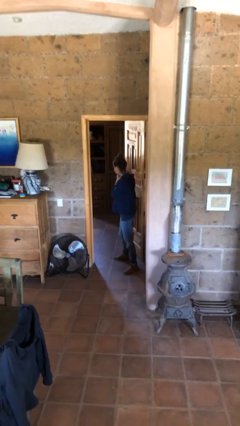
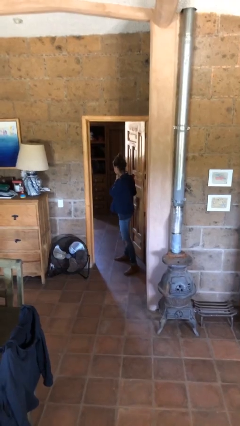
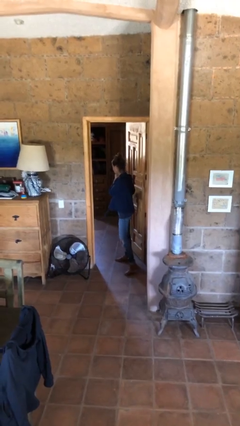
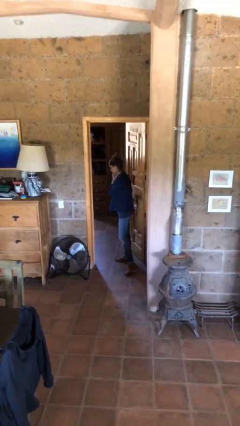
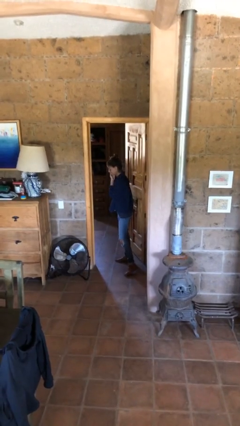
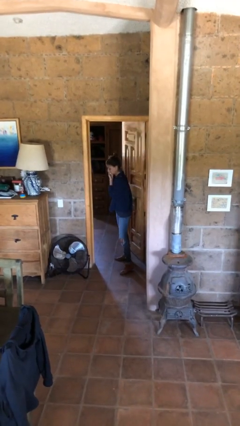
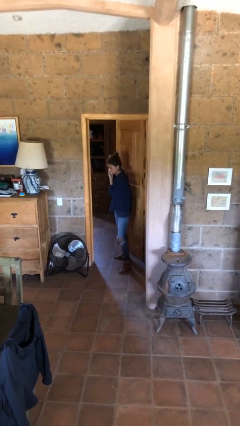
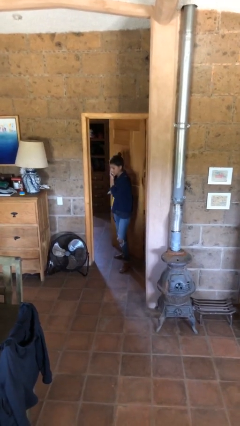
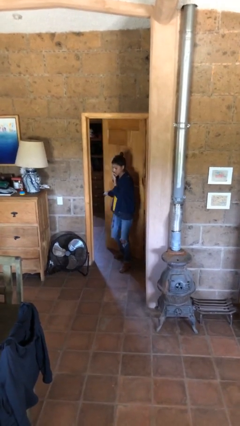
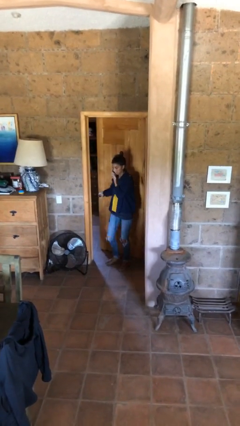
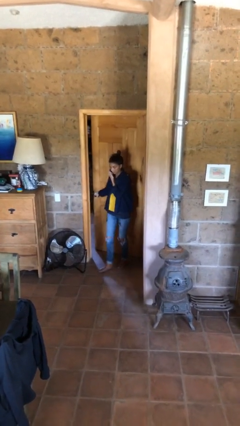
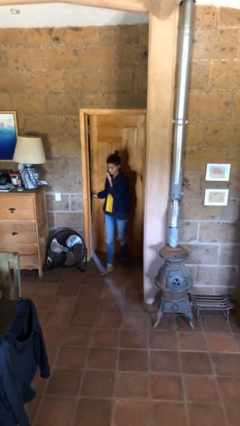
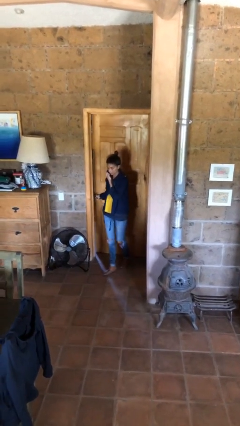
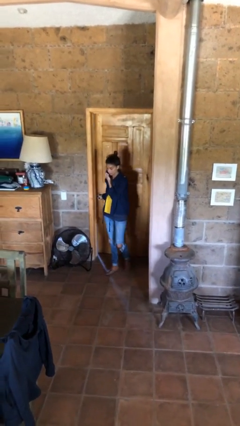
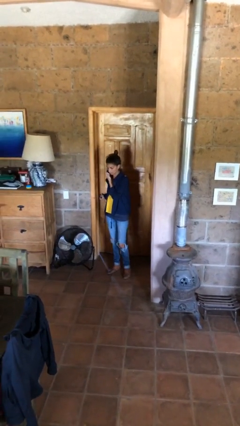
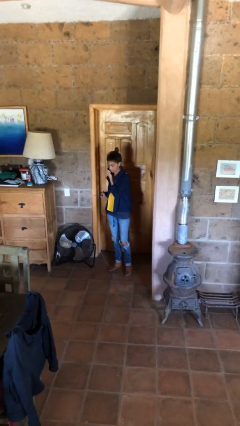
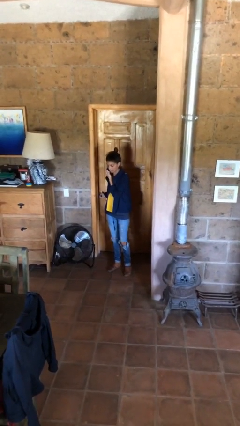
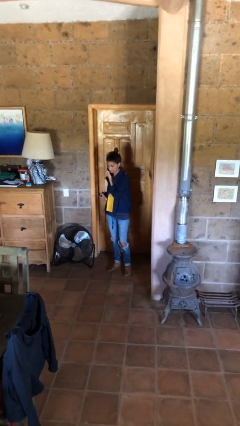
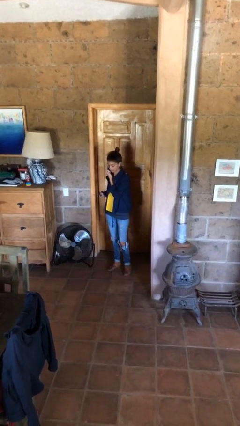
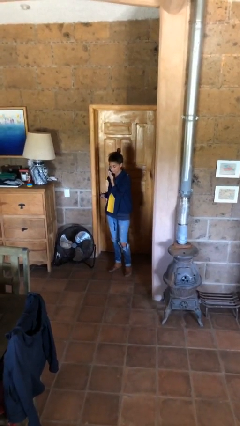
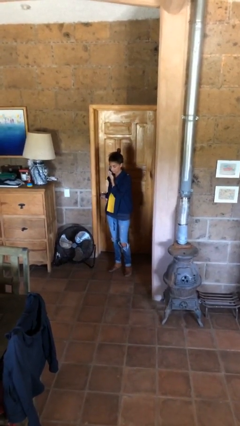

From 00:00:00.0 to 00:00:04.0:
person closes facility door

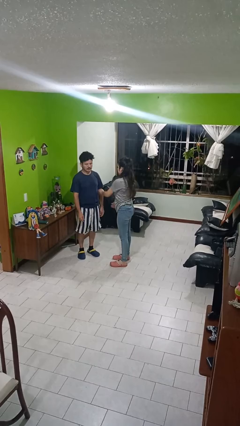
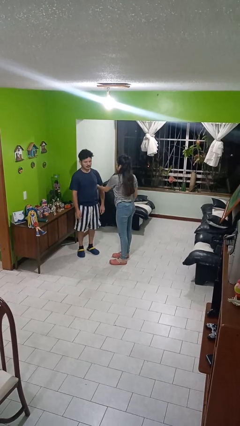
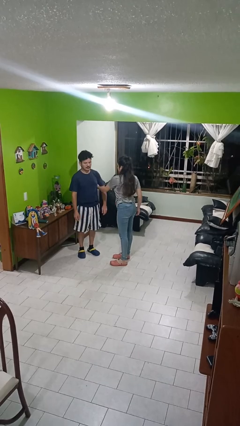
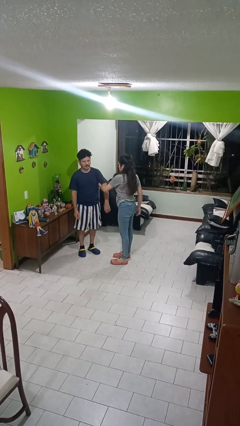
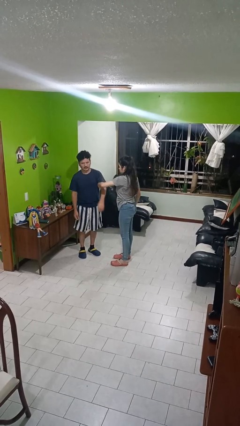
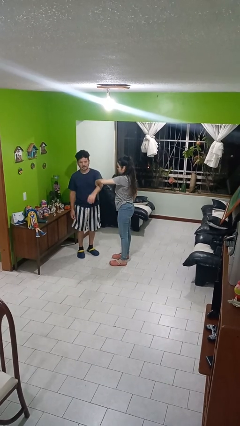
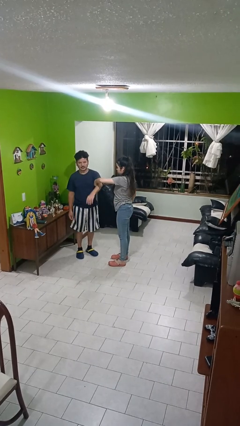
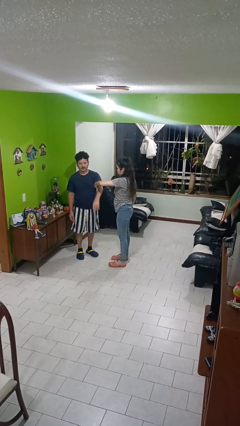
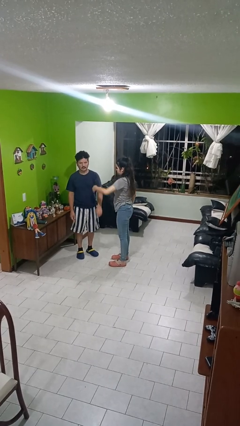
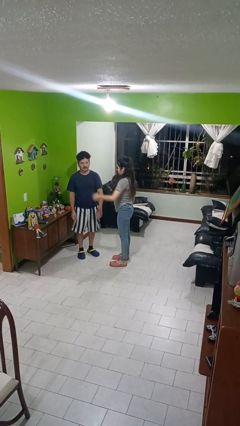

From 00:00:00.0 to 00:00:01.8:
person grabs person by bicep

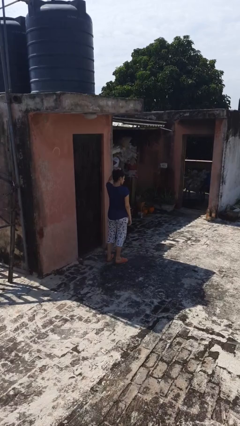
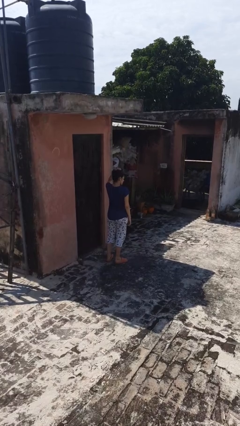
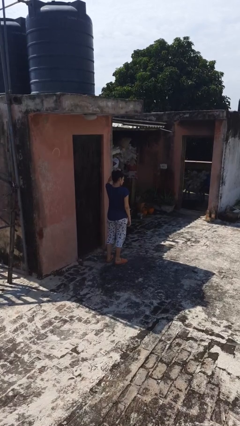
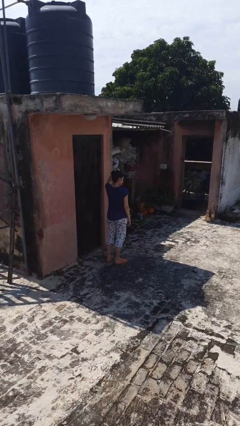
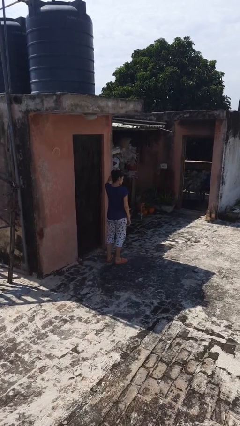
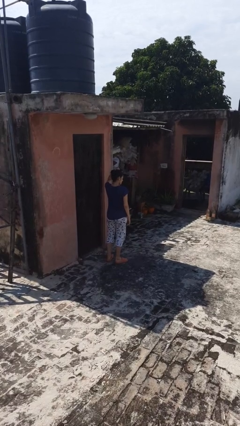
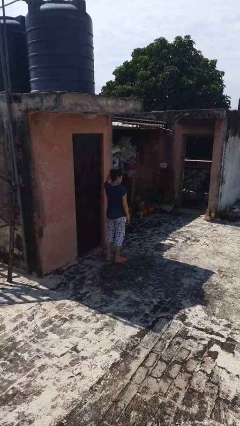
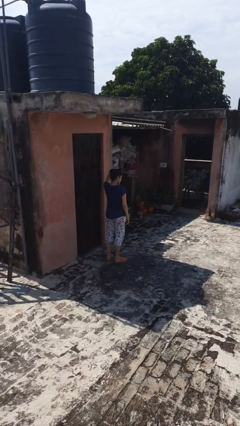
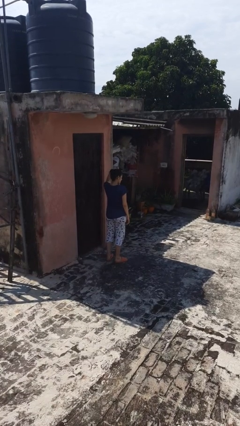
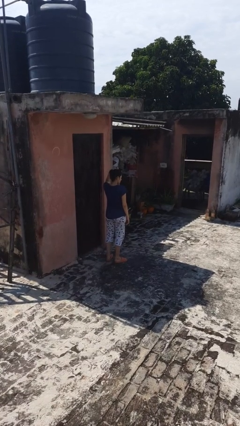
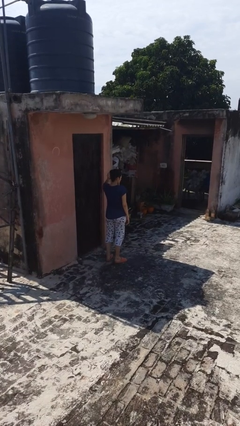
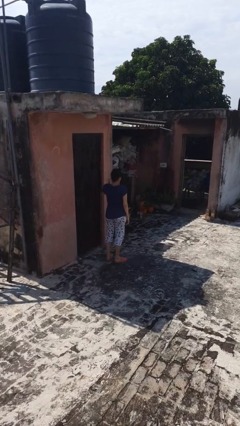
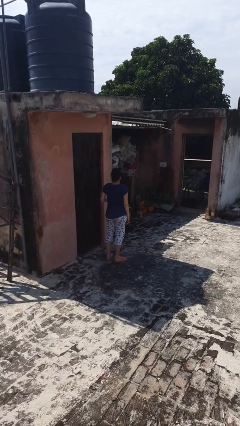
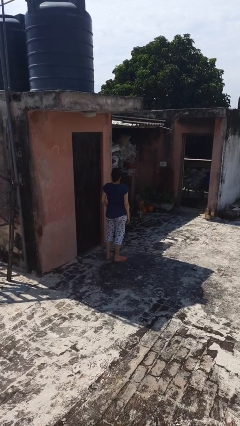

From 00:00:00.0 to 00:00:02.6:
person scratches face

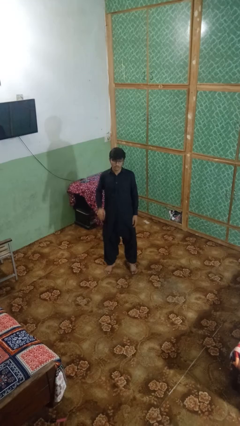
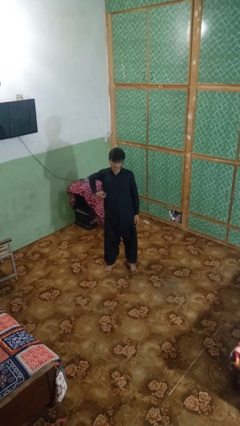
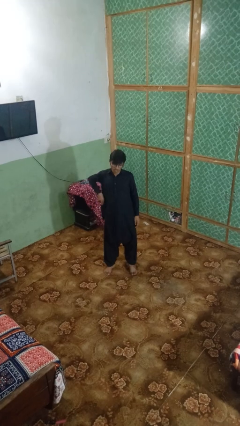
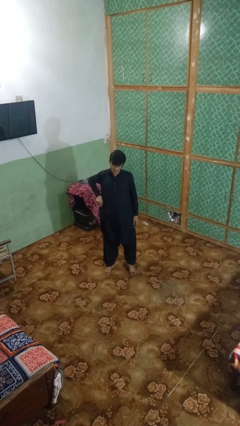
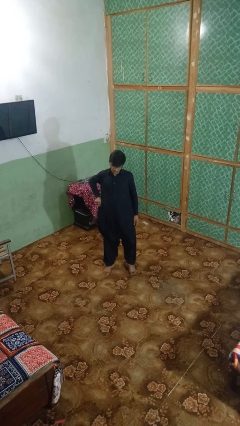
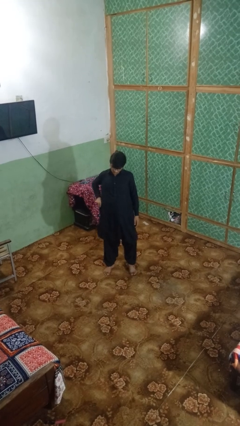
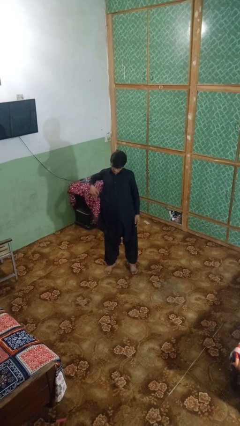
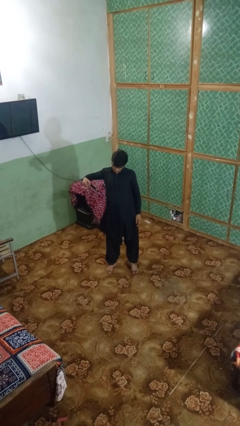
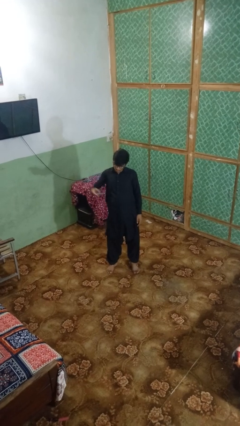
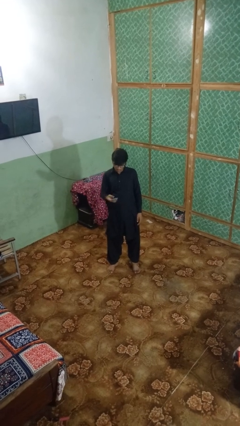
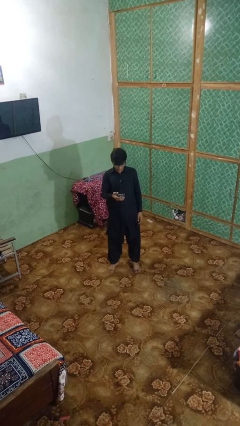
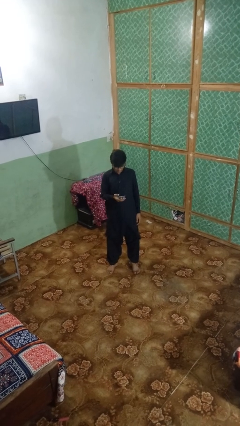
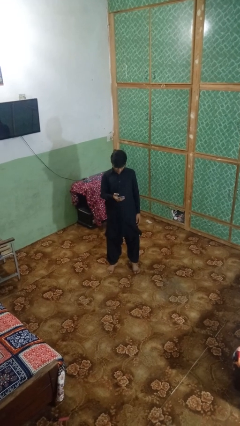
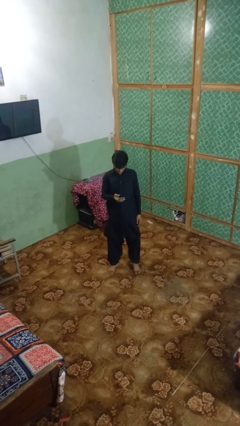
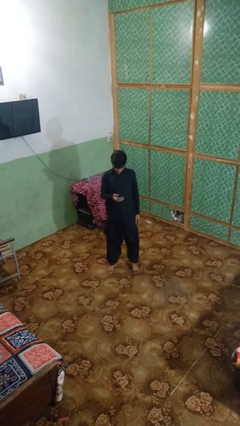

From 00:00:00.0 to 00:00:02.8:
person takes phone from pocket

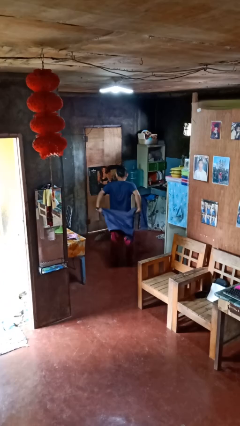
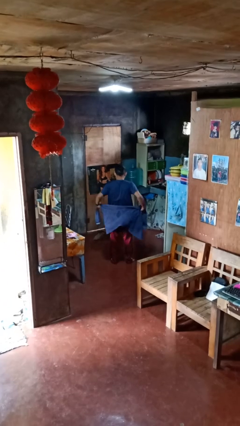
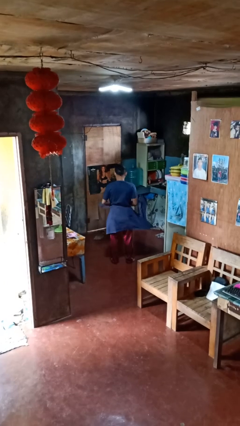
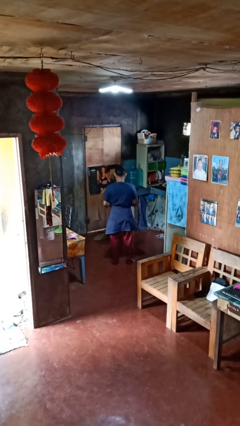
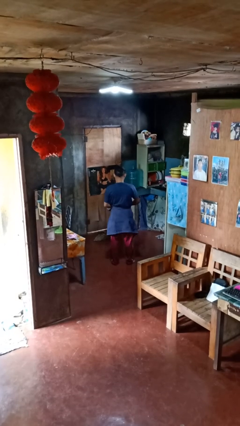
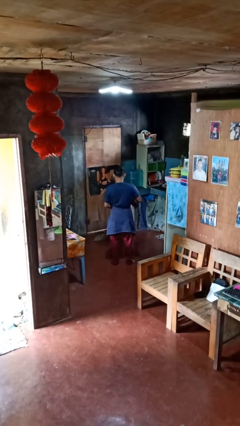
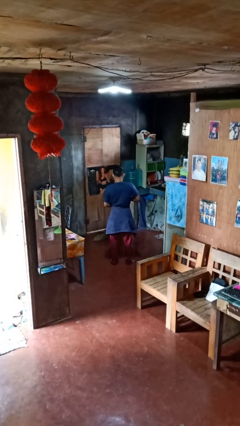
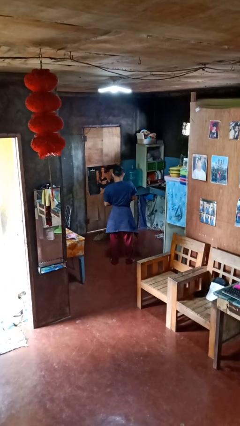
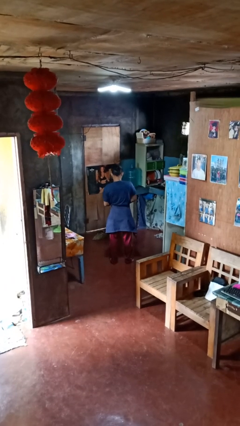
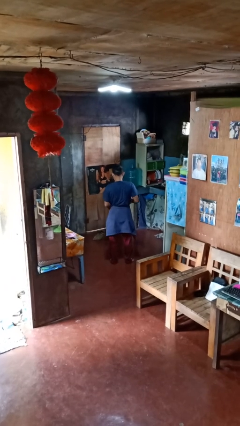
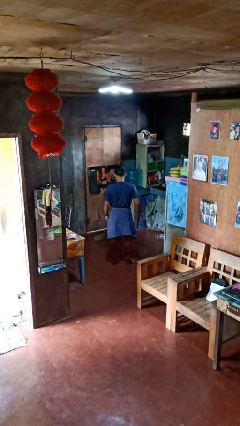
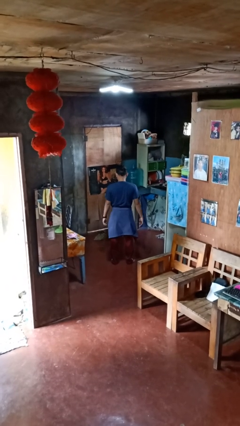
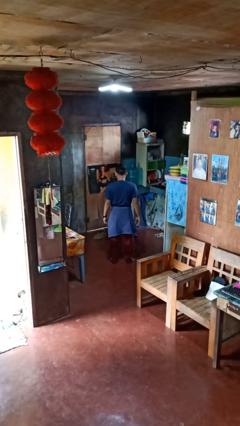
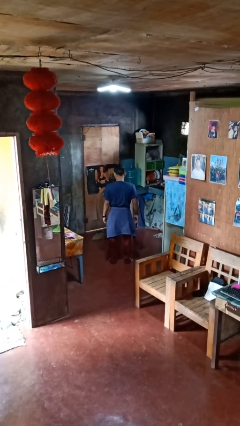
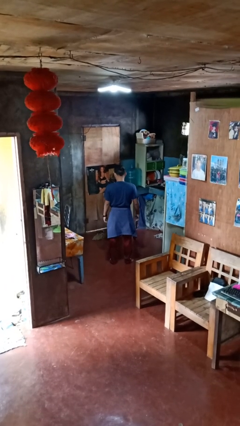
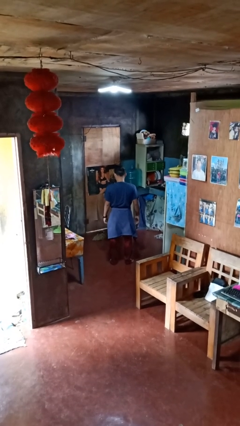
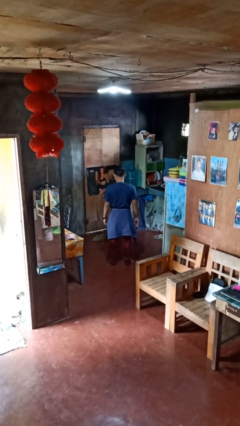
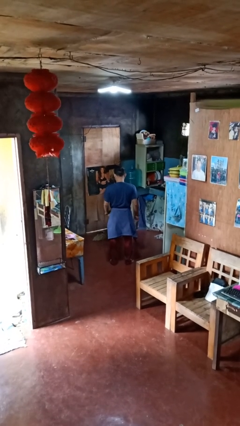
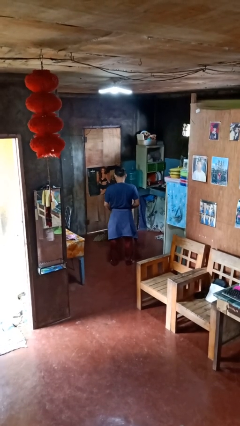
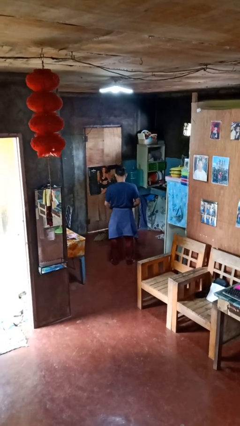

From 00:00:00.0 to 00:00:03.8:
person ties jacket around waist

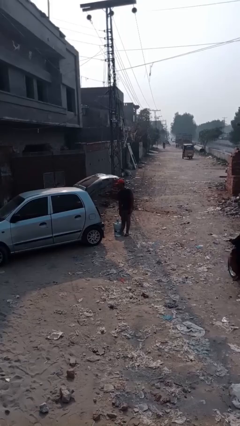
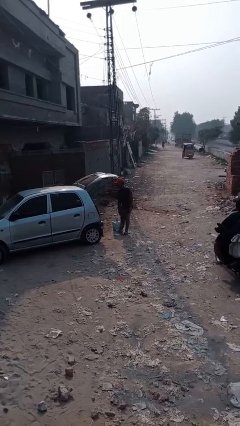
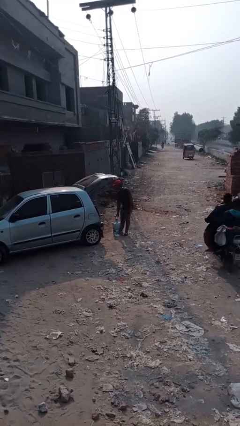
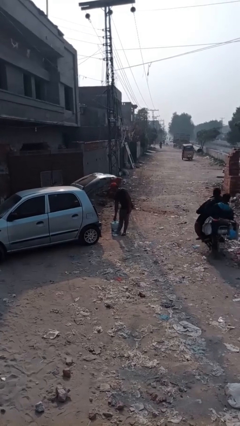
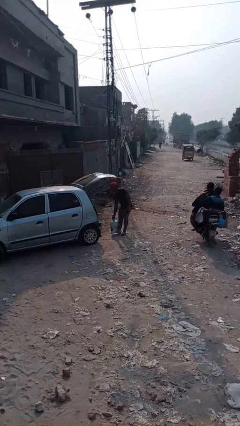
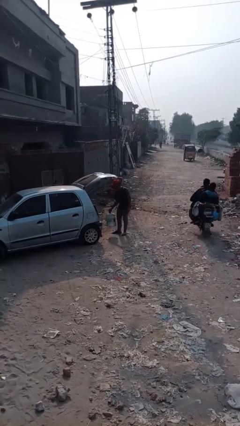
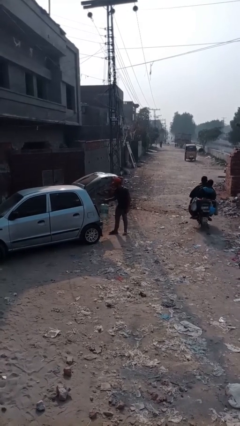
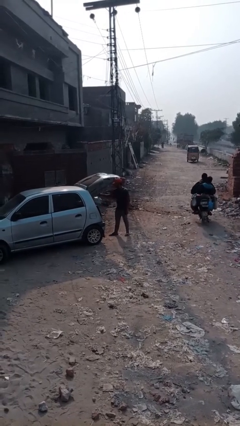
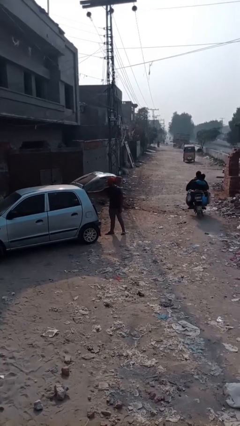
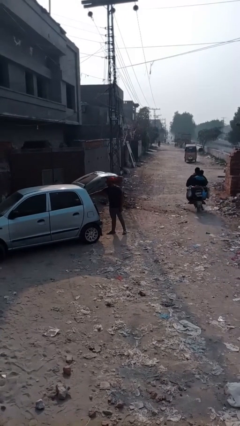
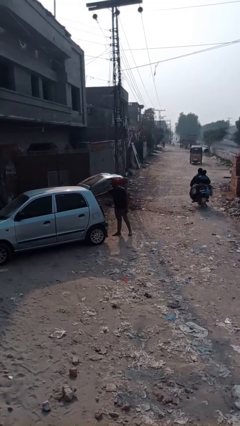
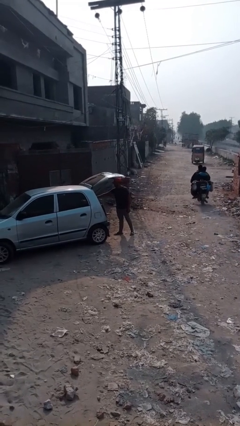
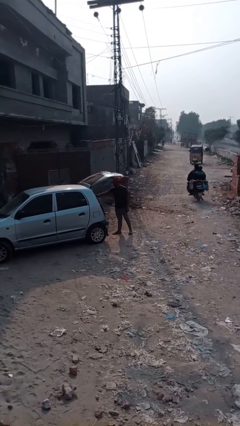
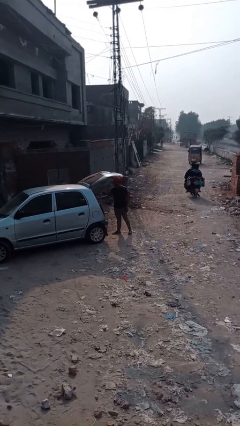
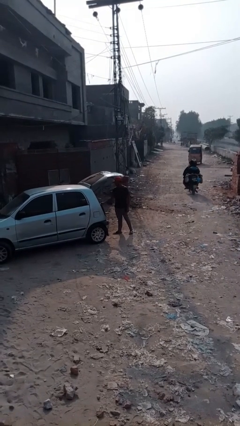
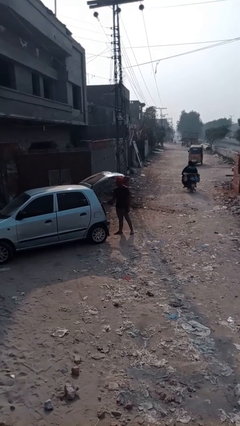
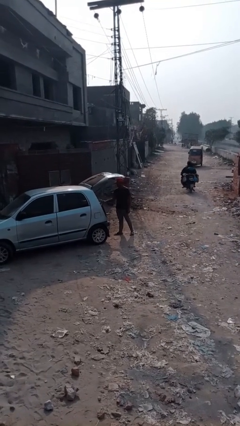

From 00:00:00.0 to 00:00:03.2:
person loads car
